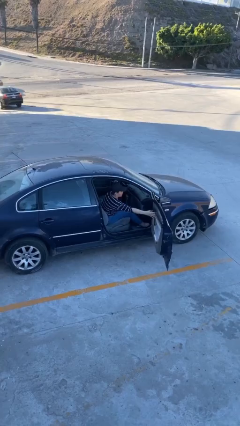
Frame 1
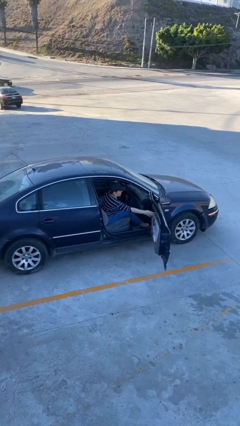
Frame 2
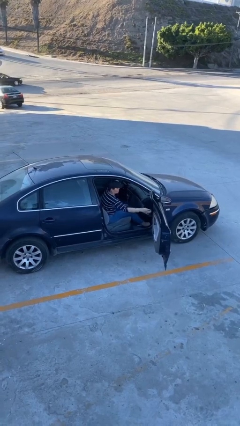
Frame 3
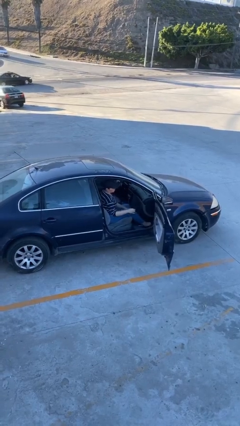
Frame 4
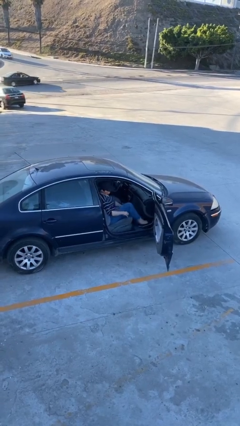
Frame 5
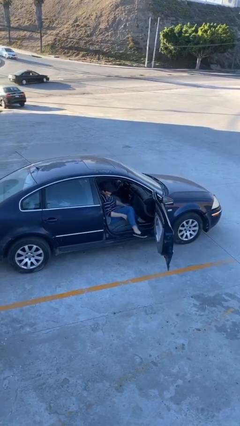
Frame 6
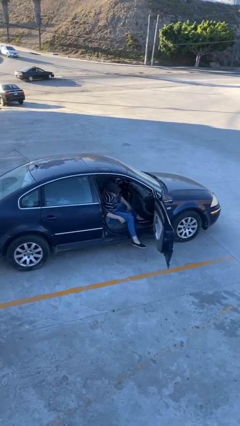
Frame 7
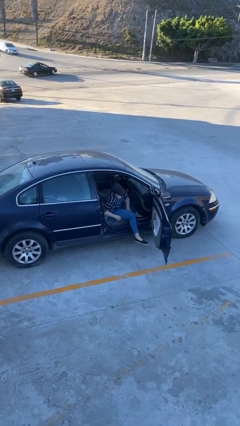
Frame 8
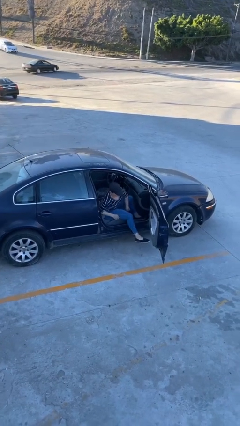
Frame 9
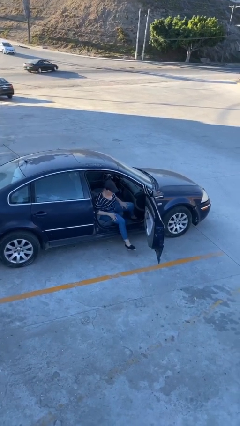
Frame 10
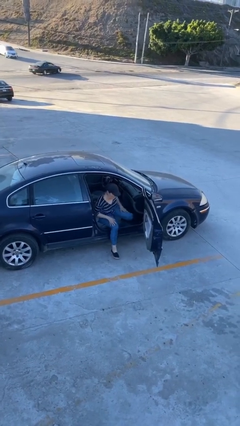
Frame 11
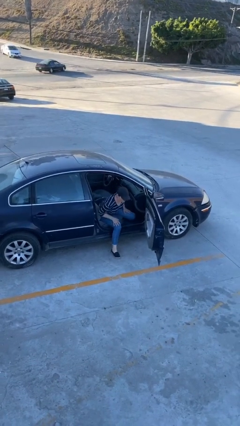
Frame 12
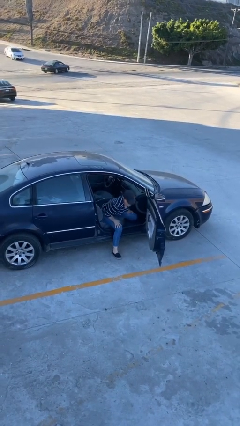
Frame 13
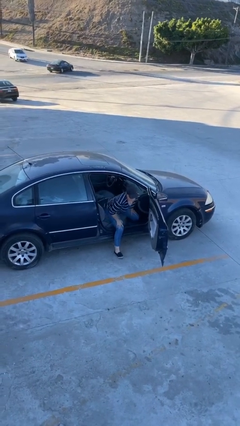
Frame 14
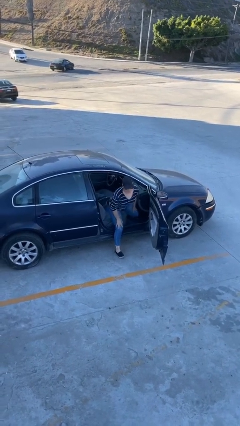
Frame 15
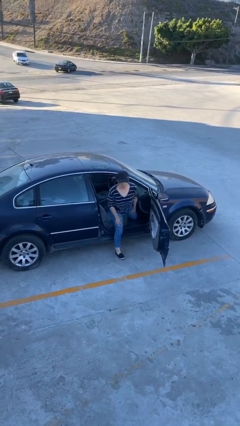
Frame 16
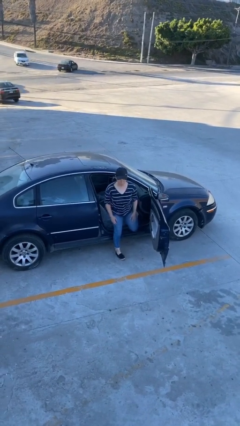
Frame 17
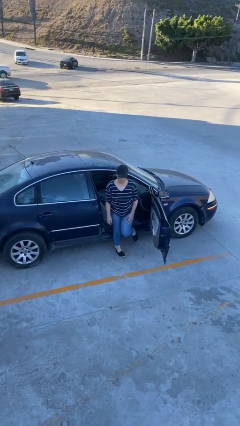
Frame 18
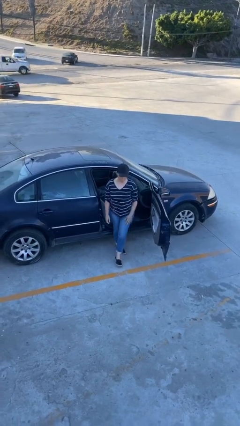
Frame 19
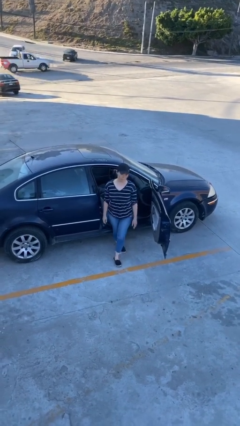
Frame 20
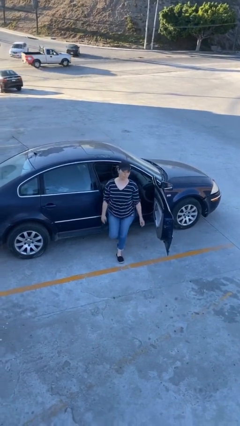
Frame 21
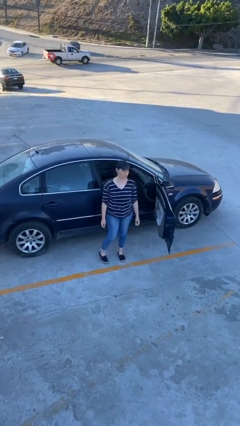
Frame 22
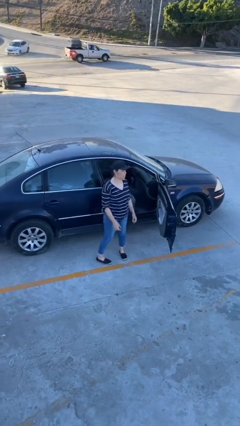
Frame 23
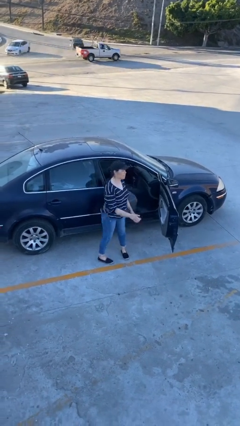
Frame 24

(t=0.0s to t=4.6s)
person exits car

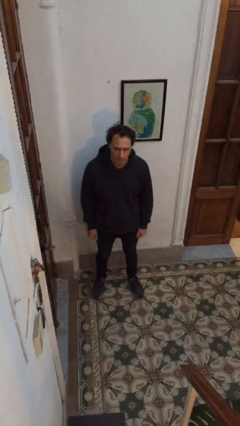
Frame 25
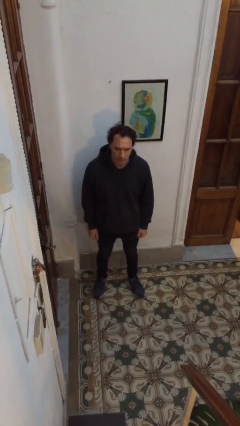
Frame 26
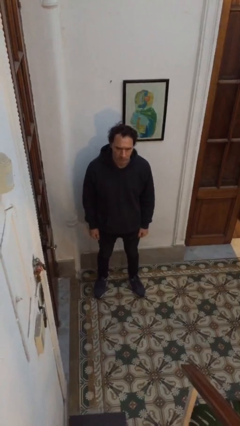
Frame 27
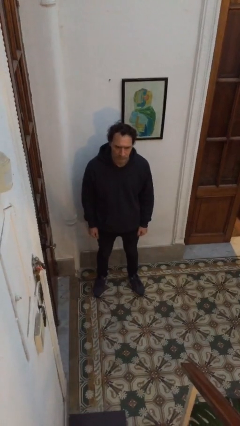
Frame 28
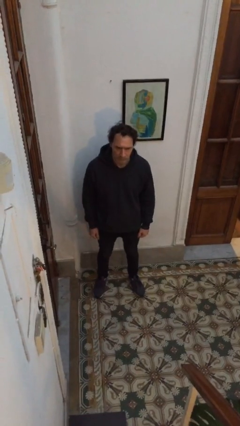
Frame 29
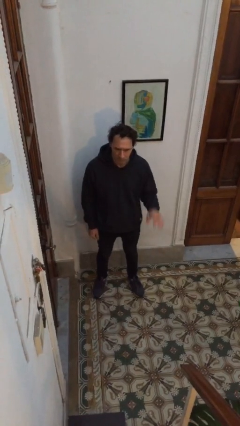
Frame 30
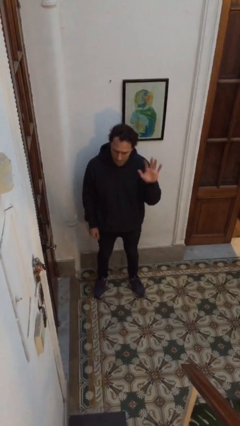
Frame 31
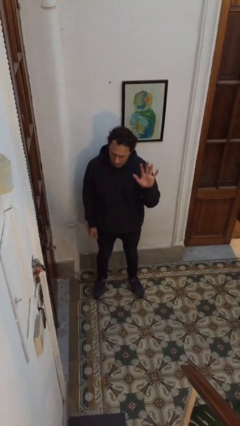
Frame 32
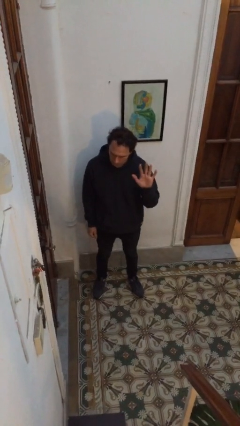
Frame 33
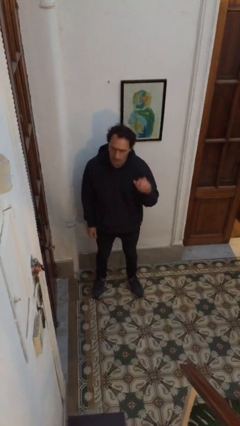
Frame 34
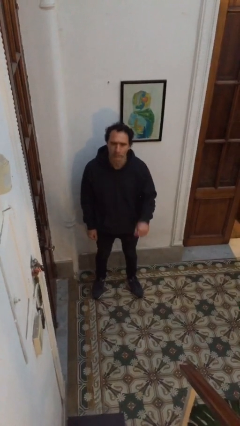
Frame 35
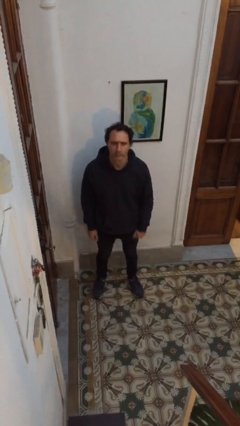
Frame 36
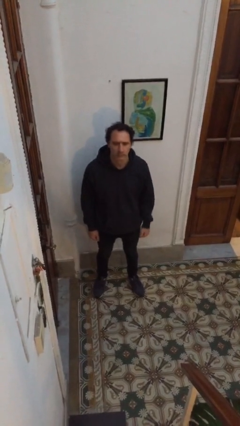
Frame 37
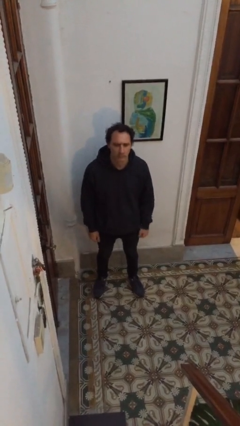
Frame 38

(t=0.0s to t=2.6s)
person gestures number five

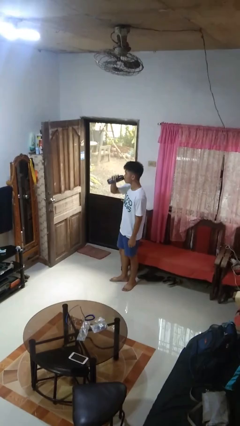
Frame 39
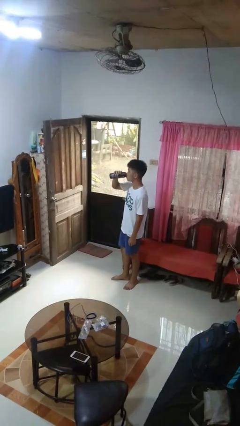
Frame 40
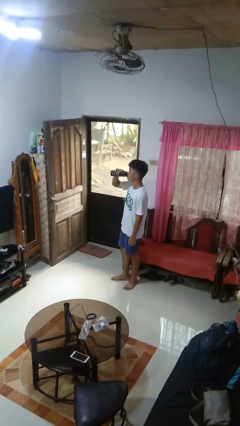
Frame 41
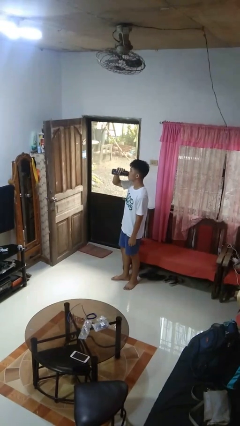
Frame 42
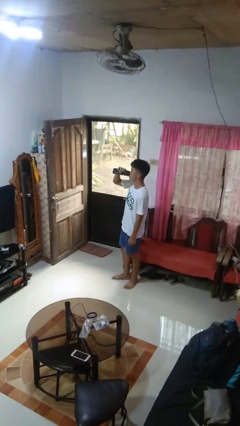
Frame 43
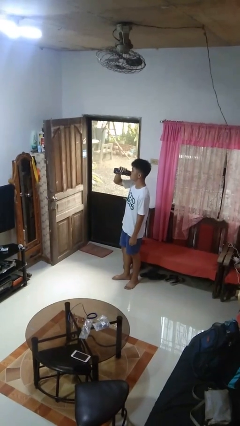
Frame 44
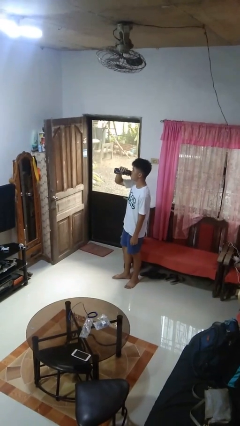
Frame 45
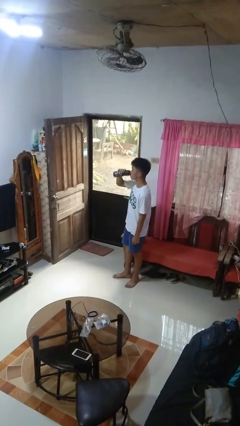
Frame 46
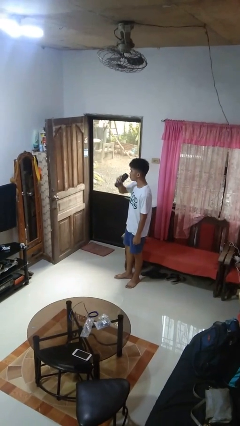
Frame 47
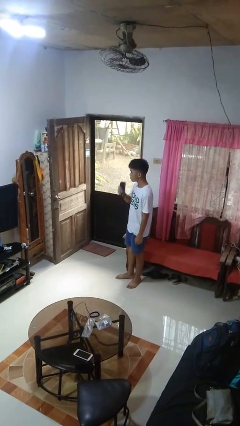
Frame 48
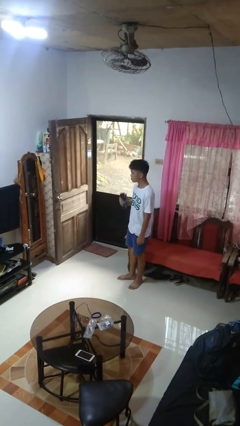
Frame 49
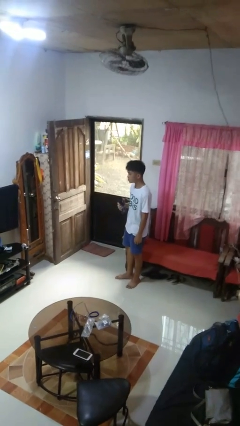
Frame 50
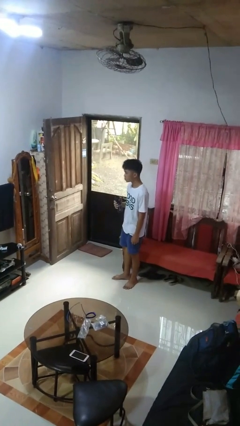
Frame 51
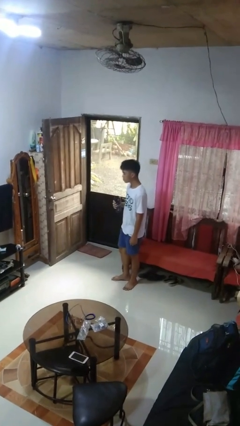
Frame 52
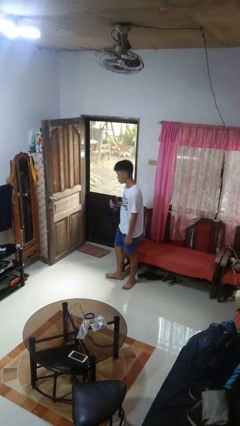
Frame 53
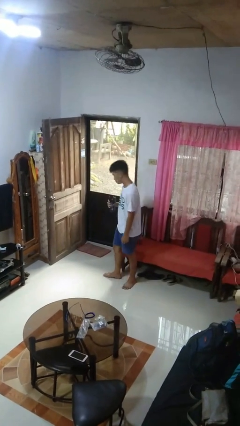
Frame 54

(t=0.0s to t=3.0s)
person drinks from bottle

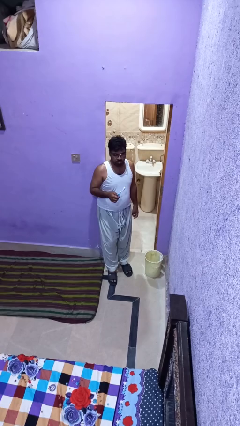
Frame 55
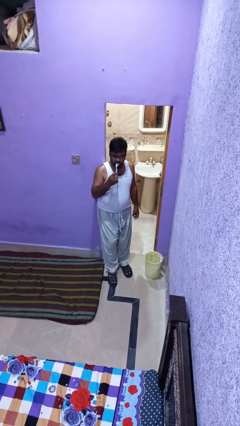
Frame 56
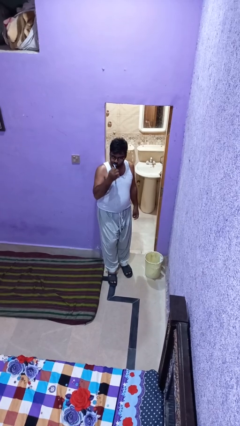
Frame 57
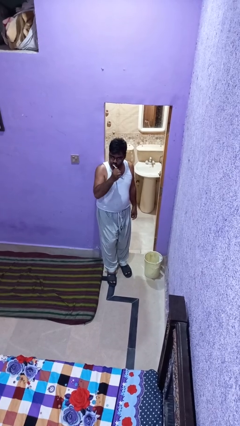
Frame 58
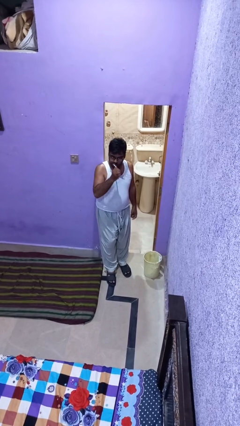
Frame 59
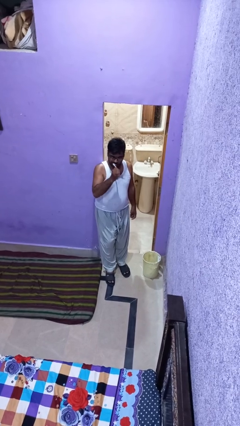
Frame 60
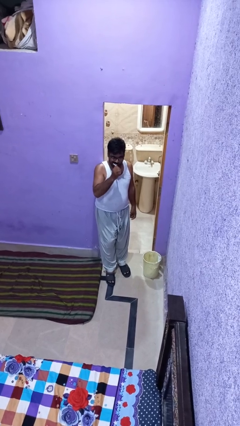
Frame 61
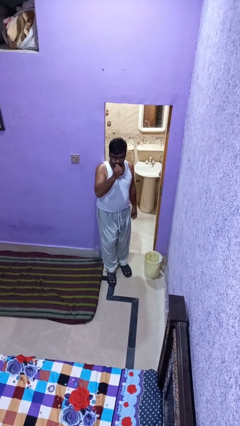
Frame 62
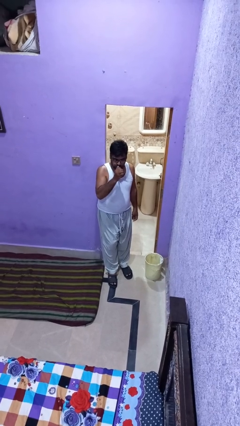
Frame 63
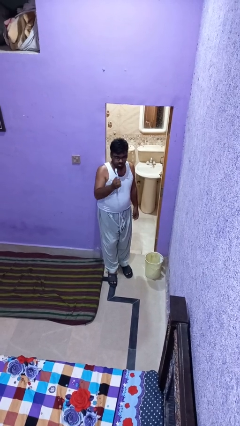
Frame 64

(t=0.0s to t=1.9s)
person brushes teeth

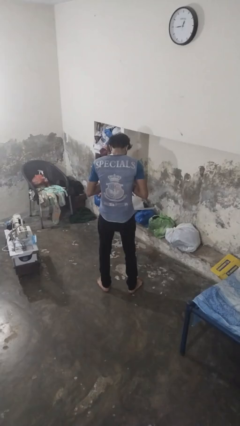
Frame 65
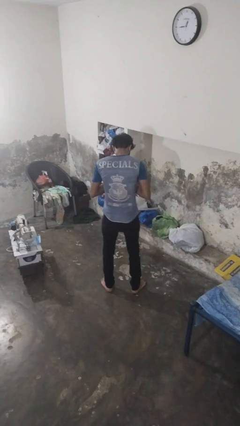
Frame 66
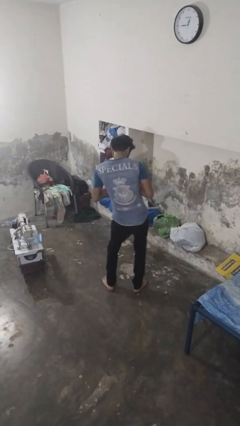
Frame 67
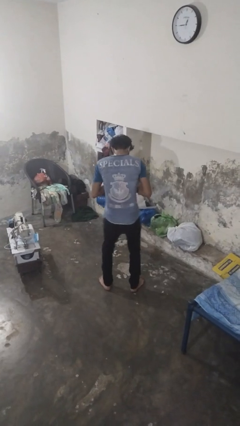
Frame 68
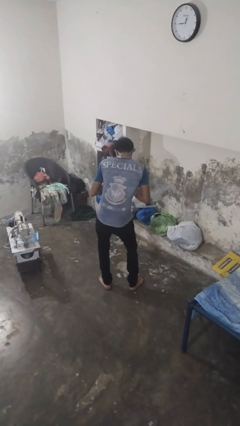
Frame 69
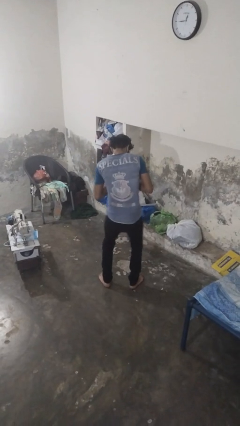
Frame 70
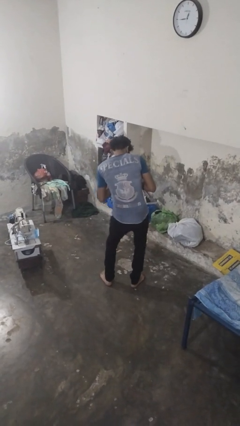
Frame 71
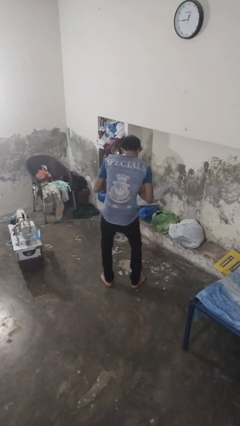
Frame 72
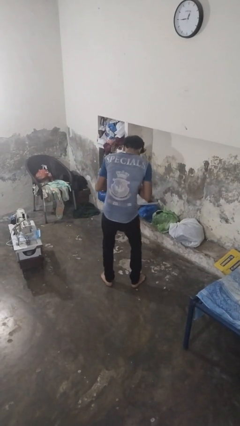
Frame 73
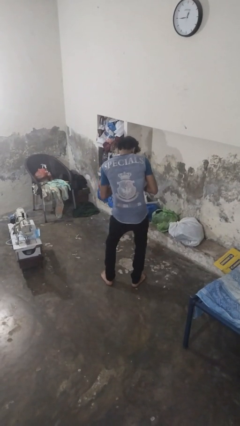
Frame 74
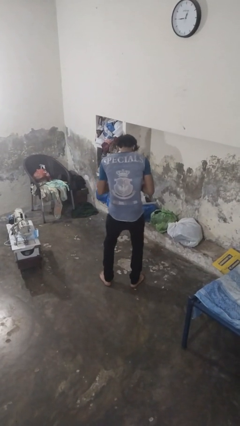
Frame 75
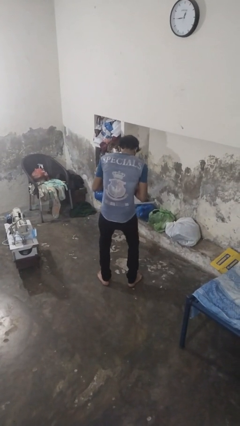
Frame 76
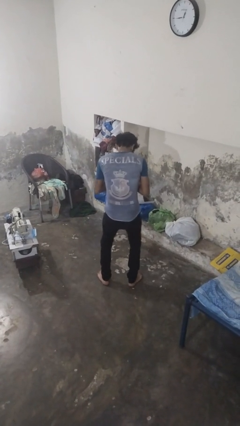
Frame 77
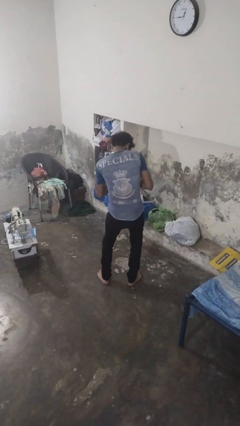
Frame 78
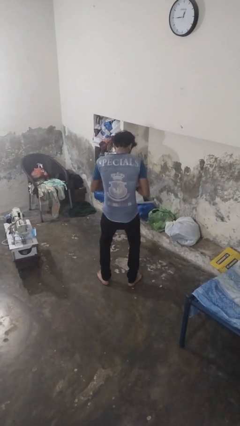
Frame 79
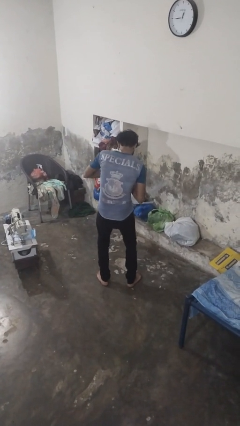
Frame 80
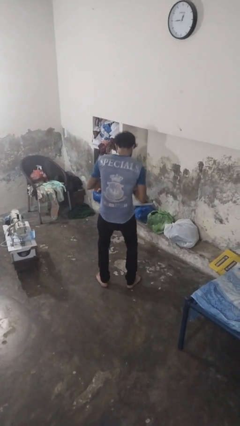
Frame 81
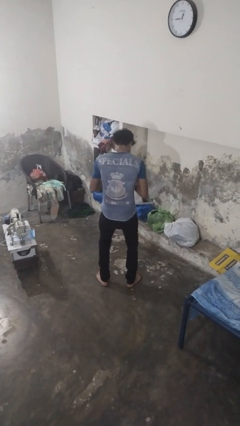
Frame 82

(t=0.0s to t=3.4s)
person wiggles hips

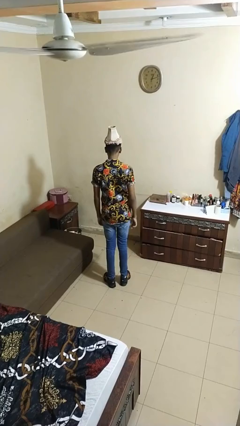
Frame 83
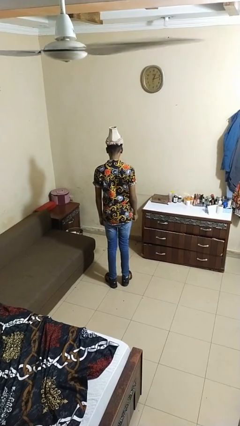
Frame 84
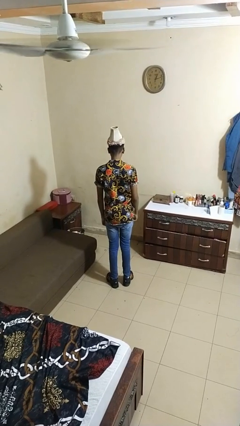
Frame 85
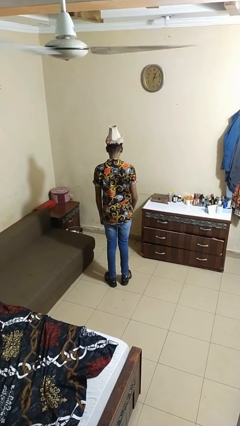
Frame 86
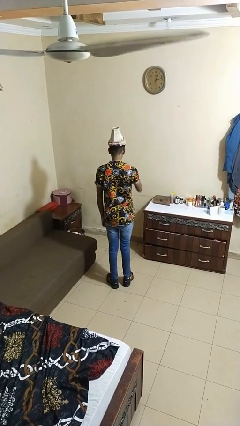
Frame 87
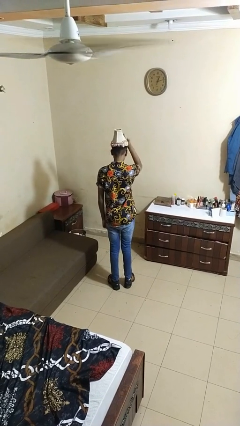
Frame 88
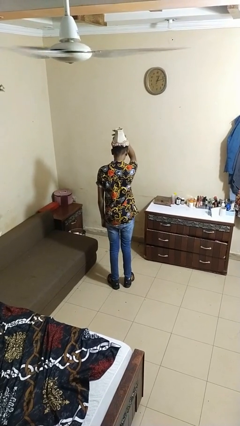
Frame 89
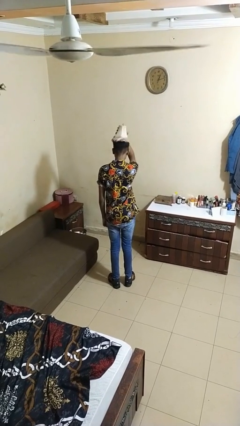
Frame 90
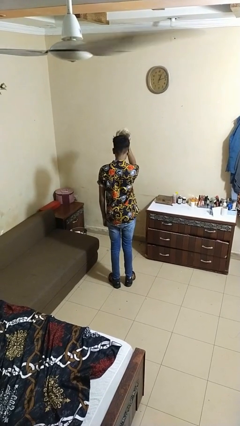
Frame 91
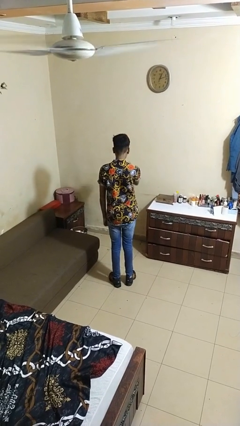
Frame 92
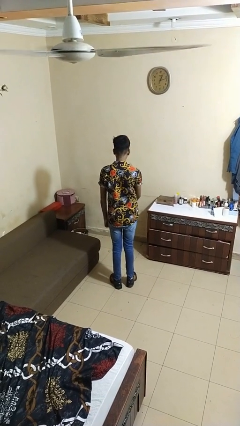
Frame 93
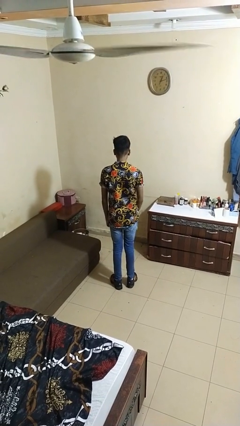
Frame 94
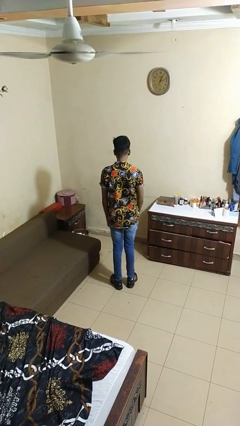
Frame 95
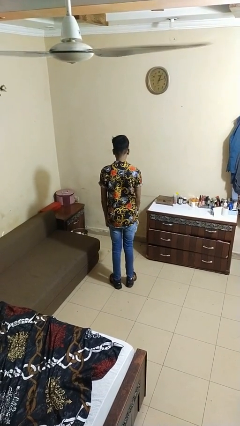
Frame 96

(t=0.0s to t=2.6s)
person takes off hat
